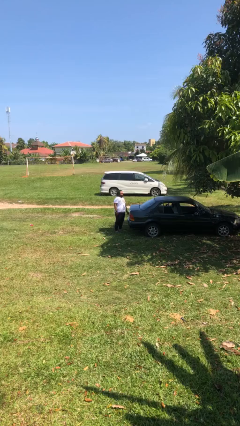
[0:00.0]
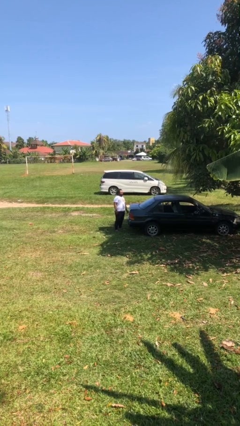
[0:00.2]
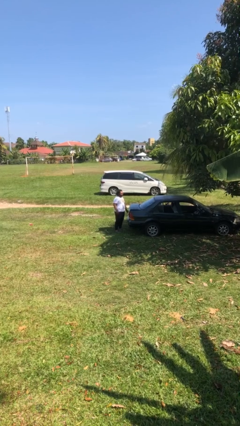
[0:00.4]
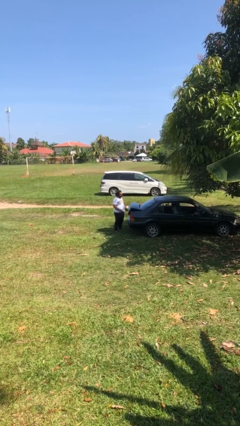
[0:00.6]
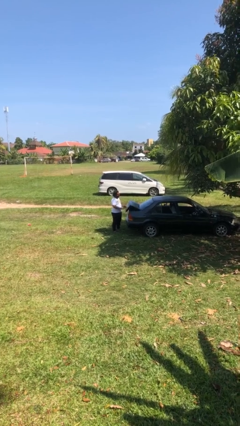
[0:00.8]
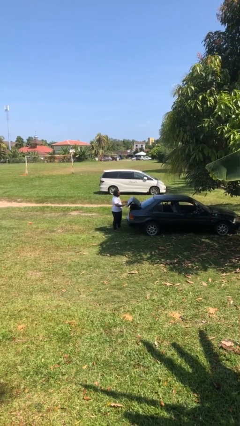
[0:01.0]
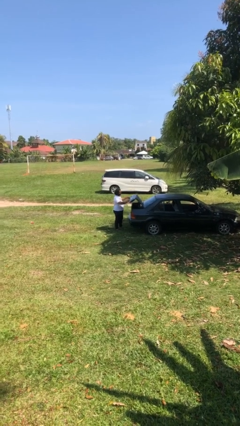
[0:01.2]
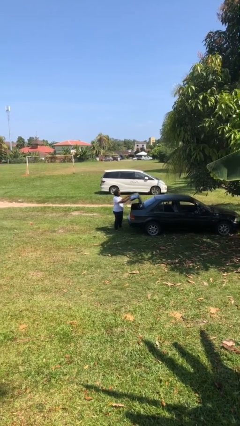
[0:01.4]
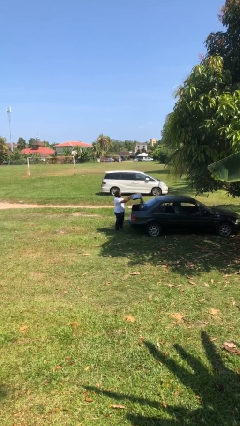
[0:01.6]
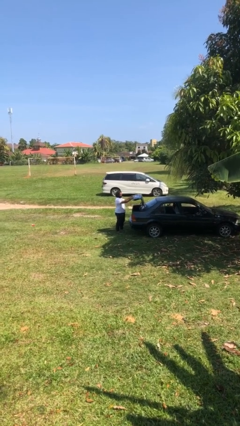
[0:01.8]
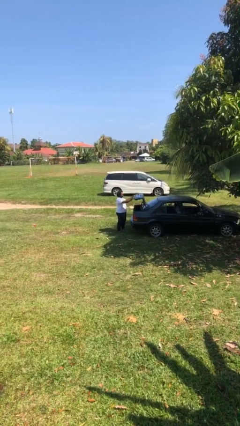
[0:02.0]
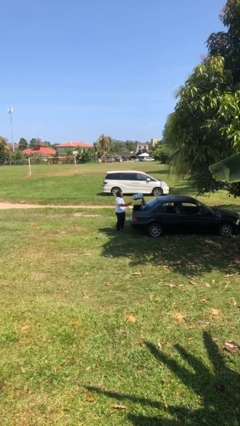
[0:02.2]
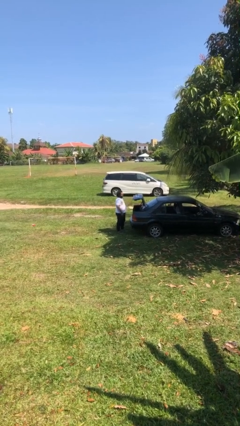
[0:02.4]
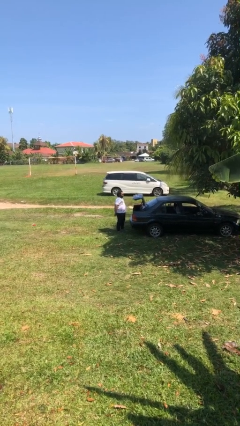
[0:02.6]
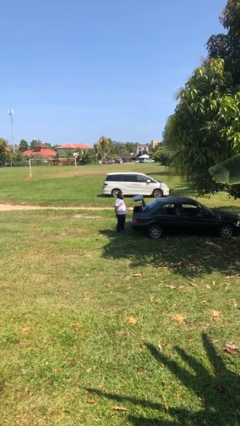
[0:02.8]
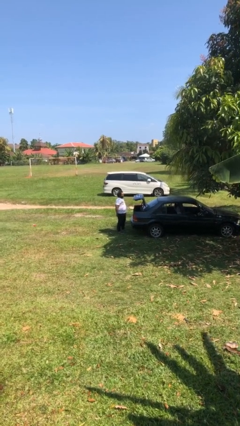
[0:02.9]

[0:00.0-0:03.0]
person opens car trunk

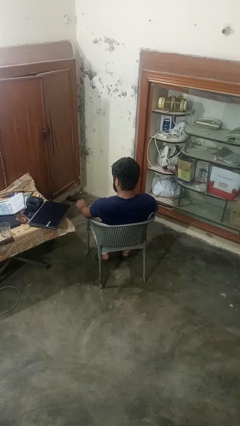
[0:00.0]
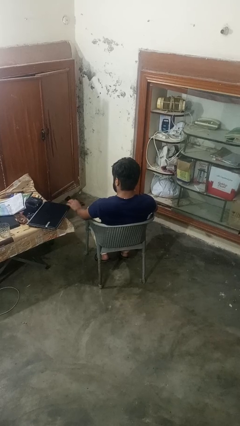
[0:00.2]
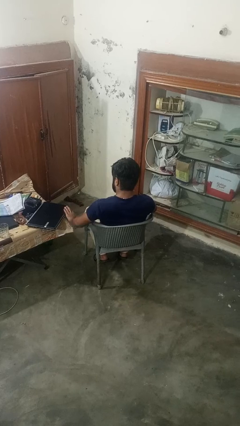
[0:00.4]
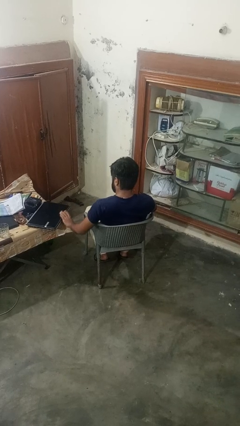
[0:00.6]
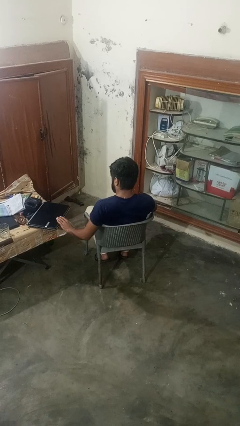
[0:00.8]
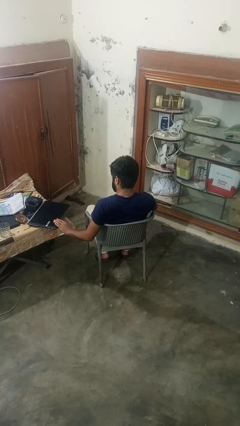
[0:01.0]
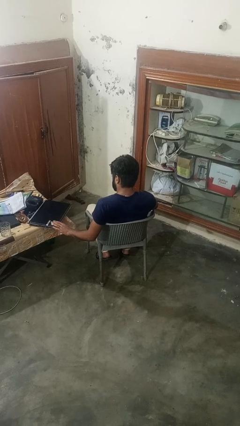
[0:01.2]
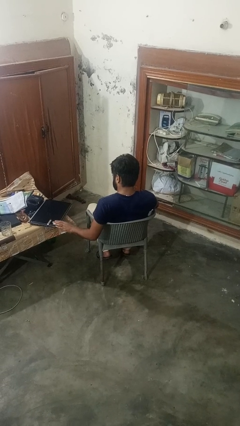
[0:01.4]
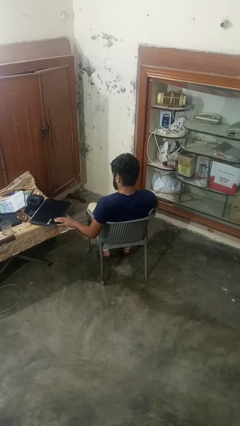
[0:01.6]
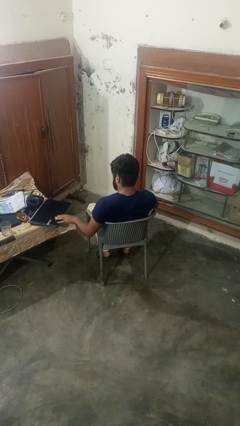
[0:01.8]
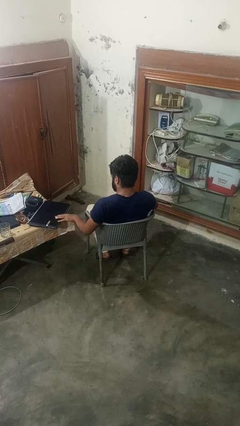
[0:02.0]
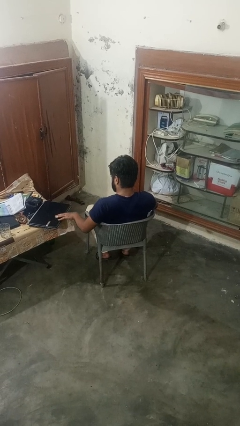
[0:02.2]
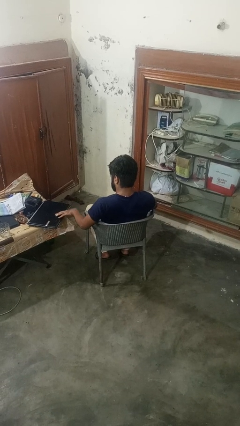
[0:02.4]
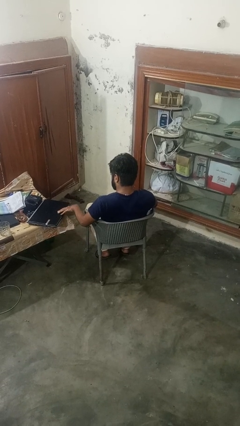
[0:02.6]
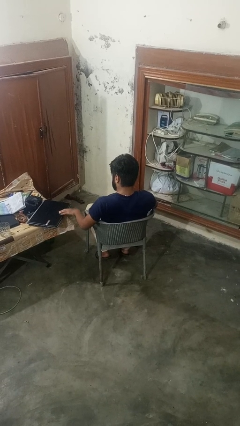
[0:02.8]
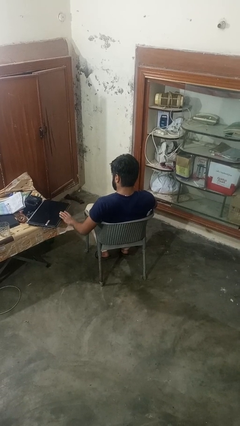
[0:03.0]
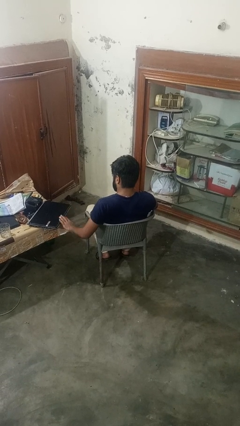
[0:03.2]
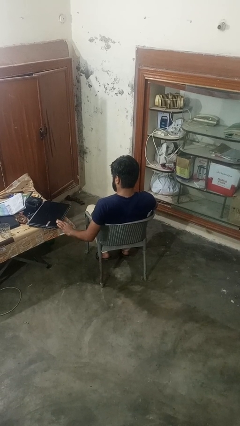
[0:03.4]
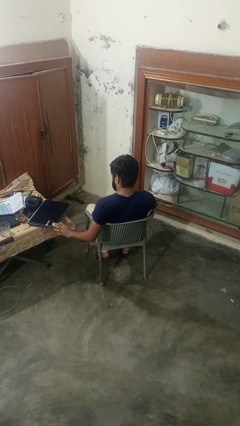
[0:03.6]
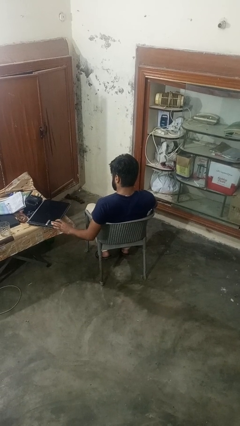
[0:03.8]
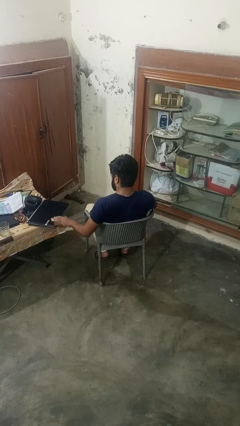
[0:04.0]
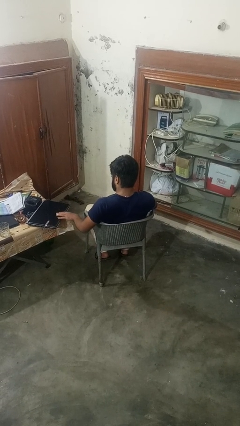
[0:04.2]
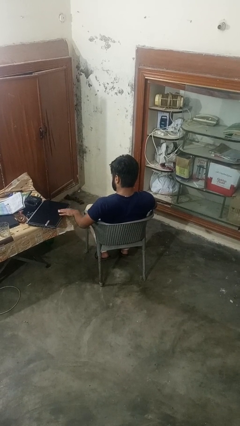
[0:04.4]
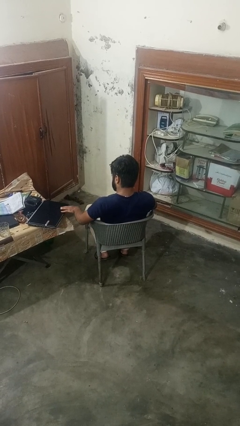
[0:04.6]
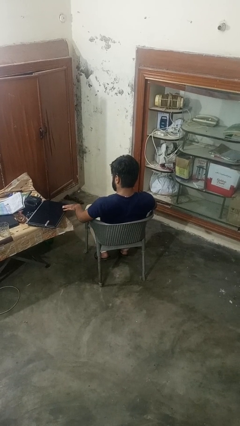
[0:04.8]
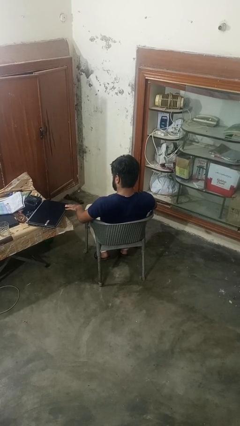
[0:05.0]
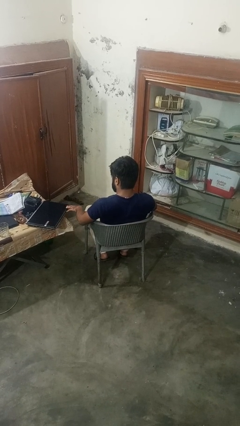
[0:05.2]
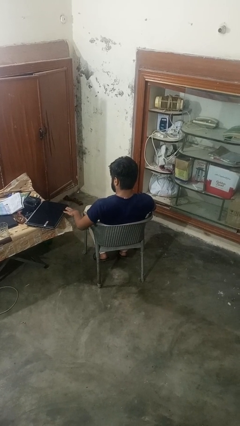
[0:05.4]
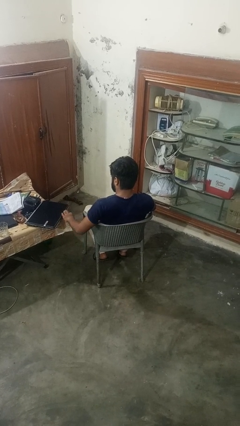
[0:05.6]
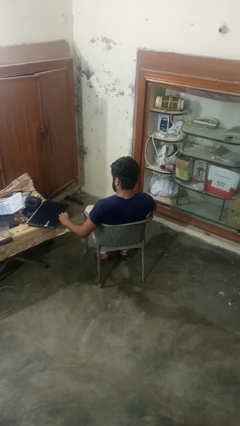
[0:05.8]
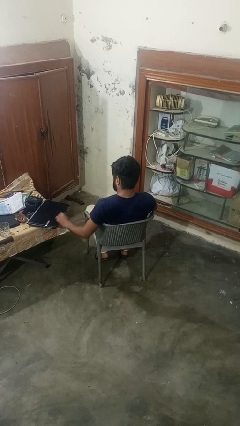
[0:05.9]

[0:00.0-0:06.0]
person waves hand over object

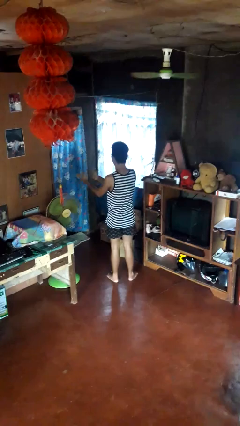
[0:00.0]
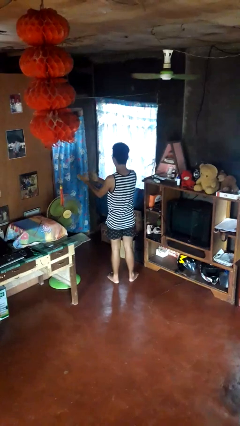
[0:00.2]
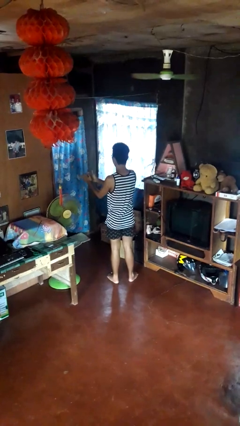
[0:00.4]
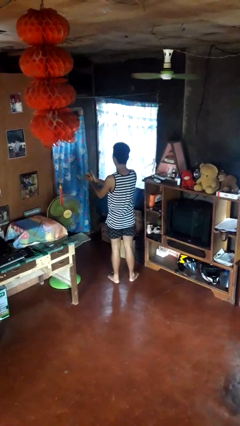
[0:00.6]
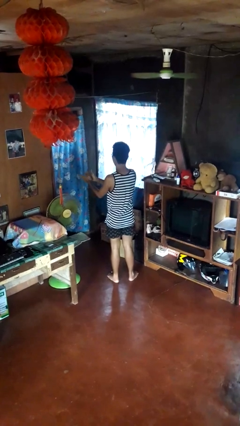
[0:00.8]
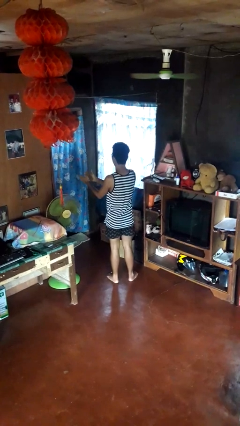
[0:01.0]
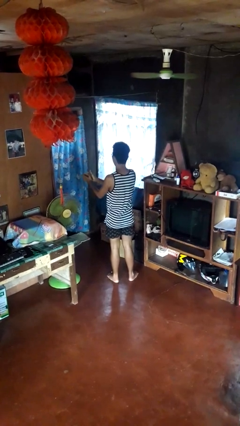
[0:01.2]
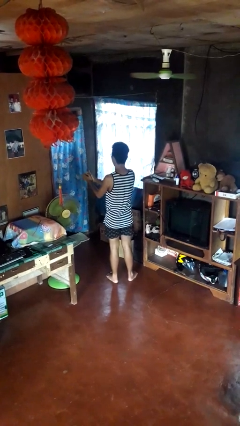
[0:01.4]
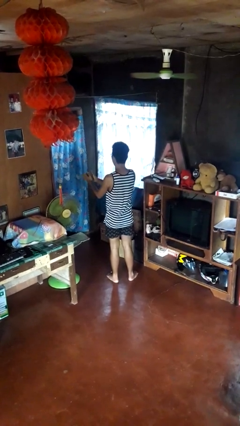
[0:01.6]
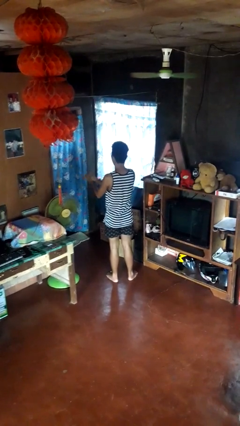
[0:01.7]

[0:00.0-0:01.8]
person claps hands

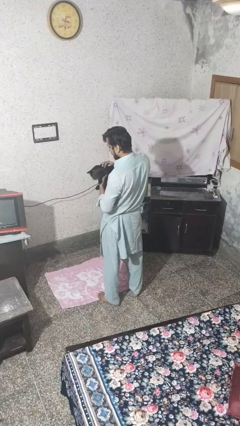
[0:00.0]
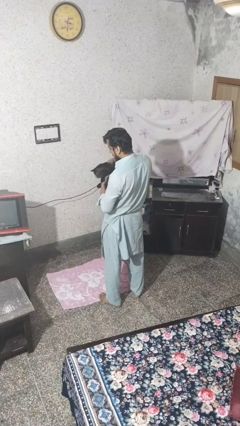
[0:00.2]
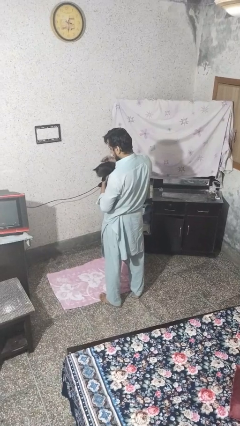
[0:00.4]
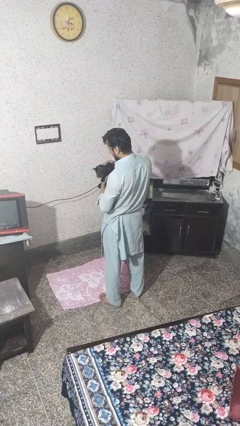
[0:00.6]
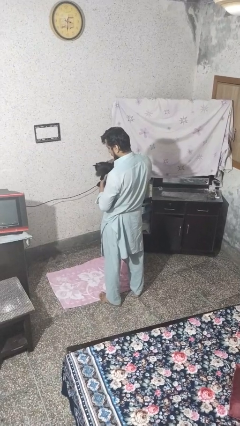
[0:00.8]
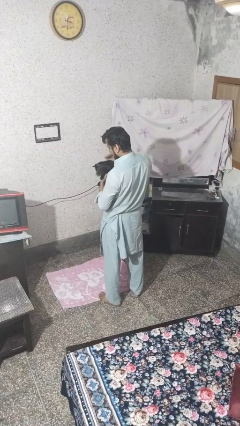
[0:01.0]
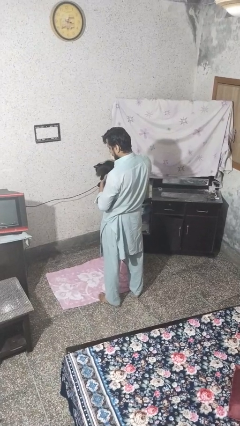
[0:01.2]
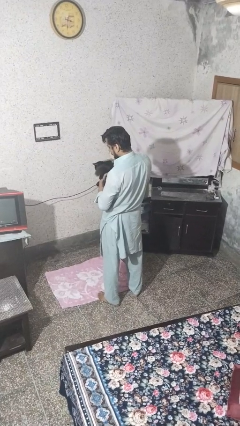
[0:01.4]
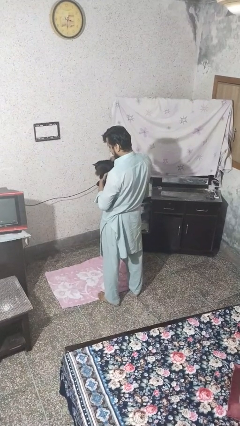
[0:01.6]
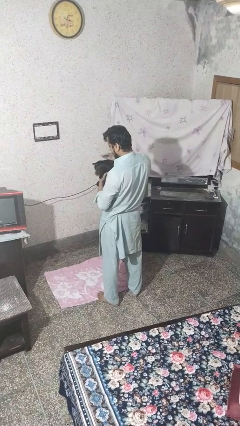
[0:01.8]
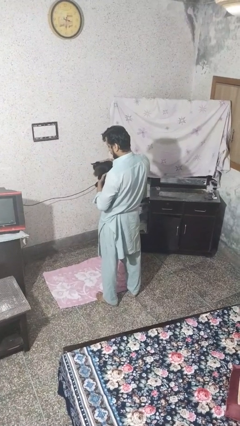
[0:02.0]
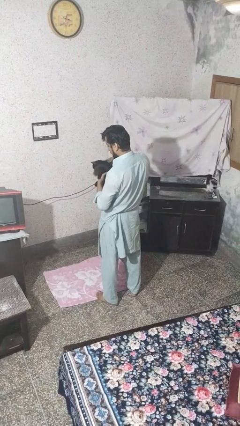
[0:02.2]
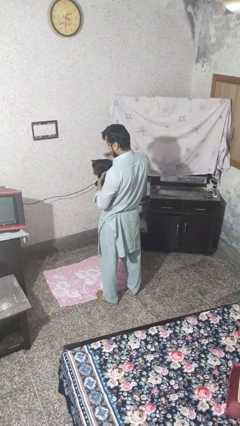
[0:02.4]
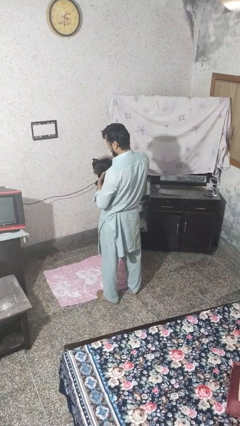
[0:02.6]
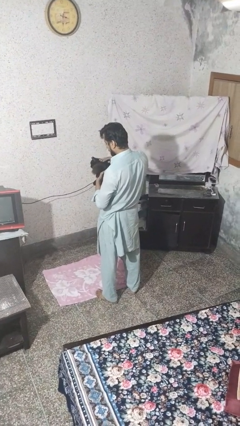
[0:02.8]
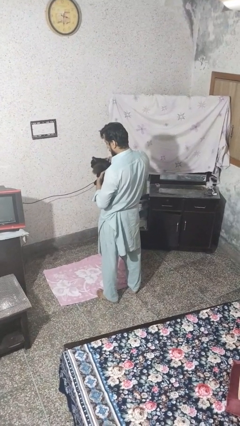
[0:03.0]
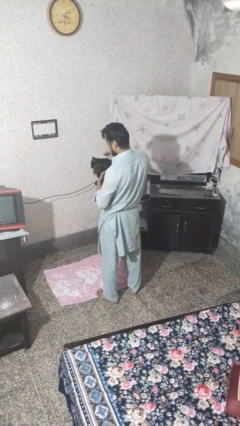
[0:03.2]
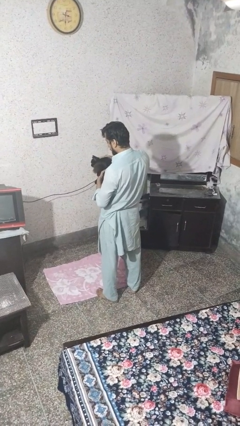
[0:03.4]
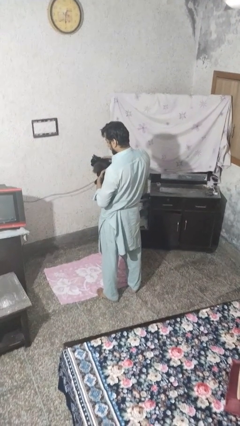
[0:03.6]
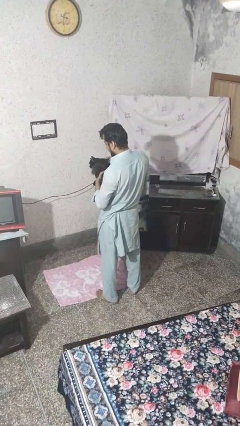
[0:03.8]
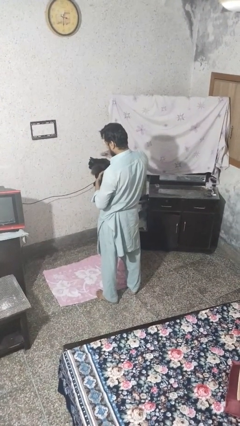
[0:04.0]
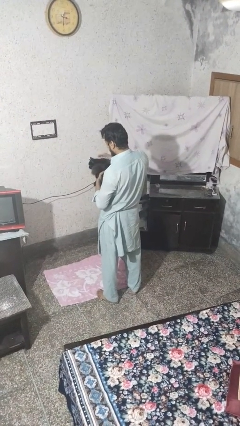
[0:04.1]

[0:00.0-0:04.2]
person pets cat

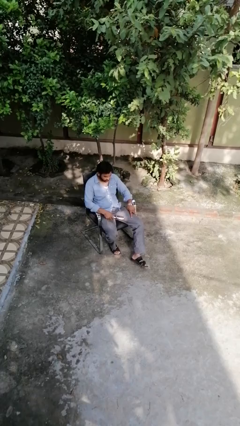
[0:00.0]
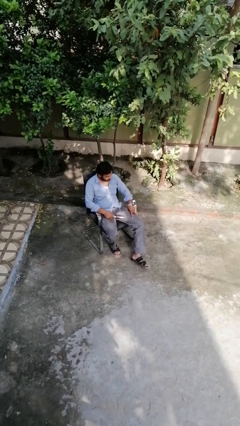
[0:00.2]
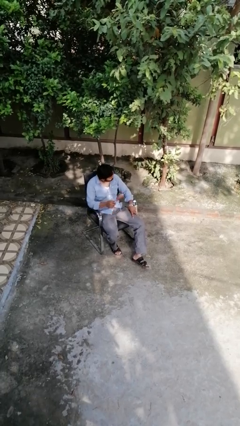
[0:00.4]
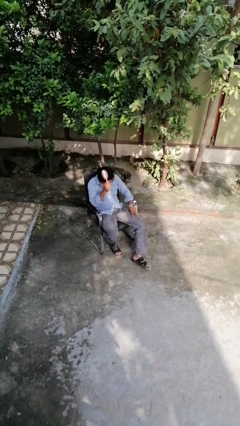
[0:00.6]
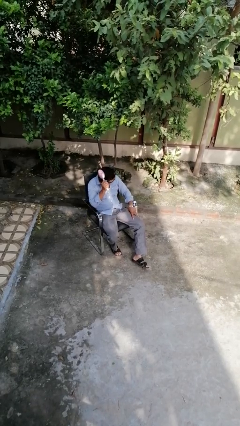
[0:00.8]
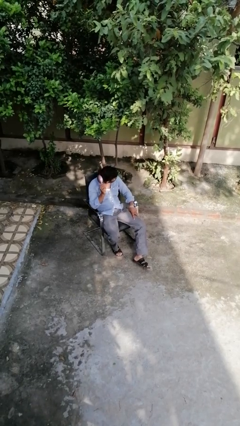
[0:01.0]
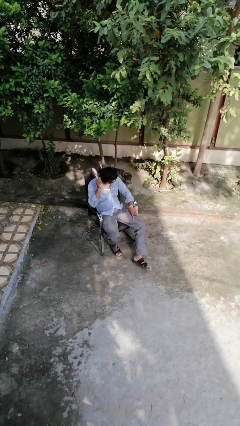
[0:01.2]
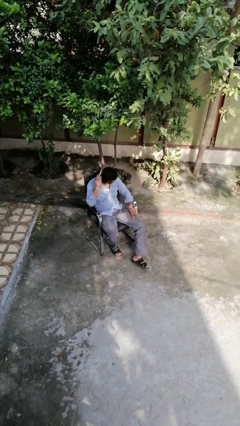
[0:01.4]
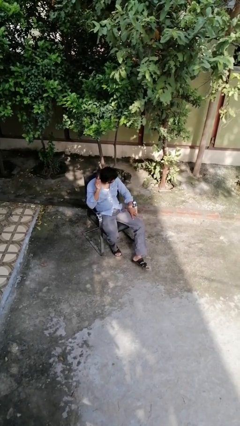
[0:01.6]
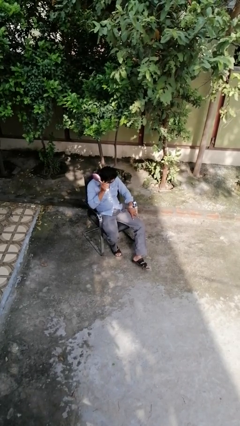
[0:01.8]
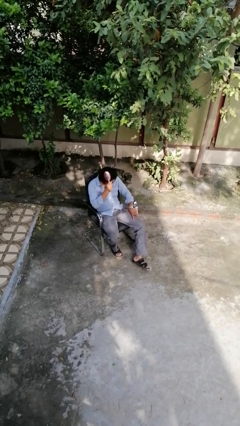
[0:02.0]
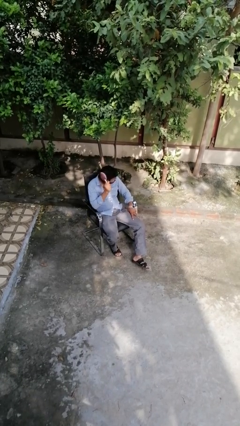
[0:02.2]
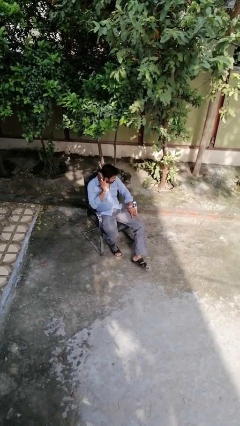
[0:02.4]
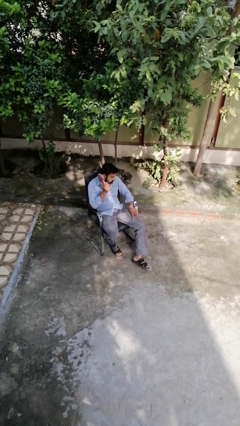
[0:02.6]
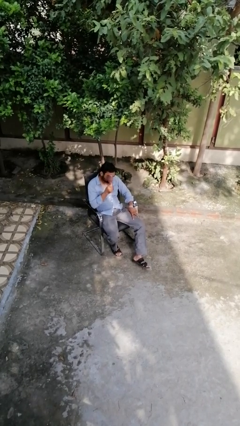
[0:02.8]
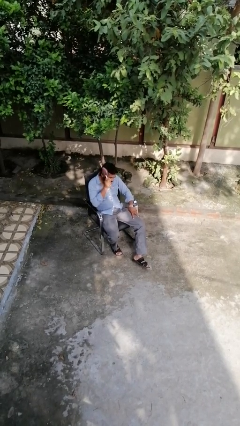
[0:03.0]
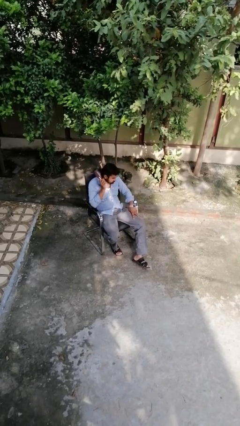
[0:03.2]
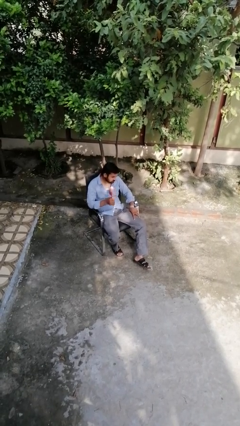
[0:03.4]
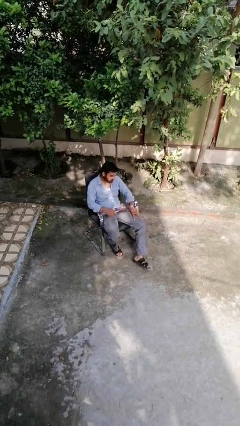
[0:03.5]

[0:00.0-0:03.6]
person brushes hair
